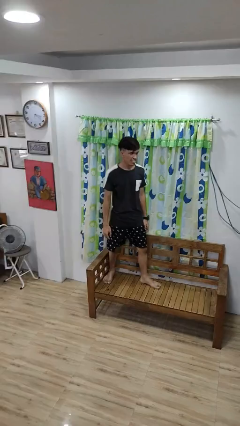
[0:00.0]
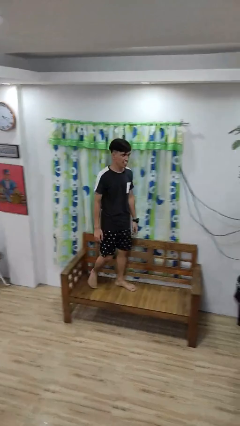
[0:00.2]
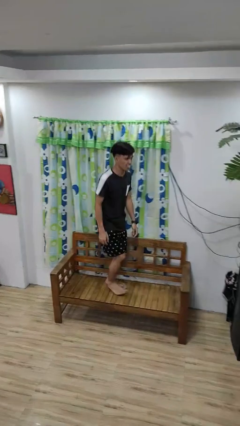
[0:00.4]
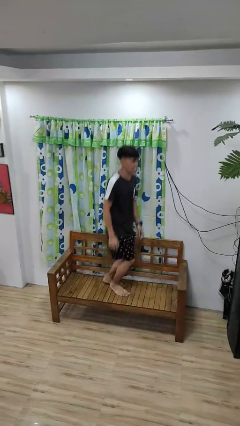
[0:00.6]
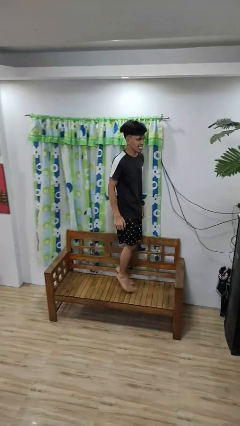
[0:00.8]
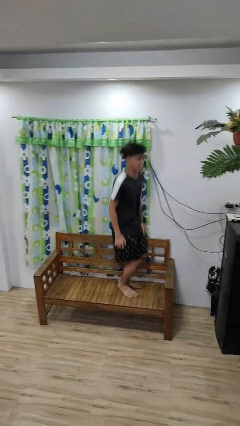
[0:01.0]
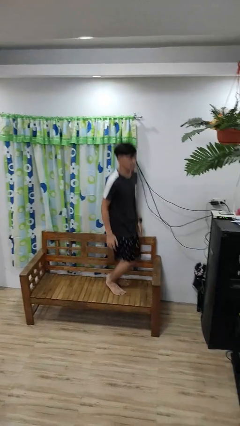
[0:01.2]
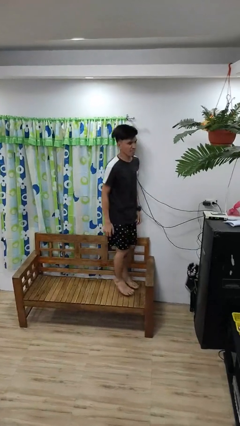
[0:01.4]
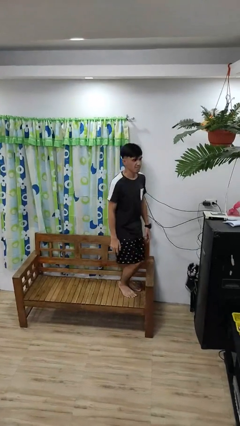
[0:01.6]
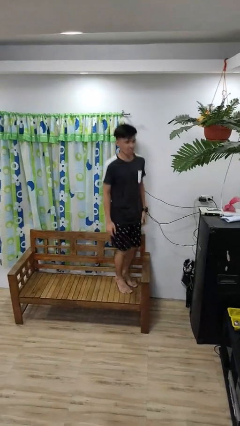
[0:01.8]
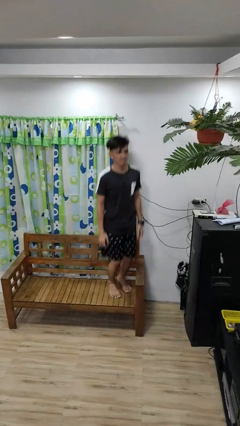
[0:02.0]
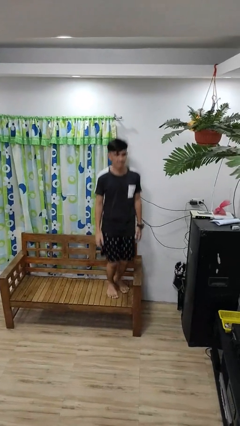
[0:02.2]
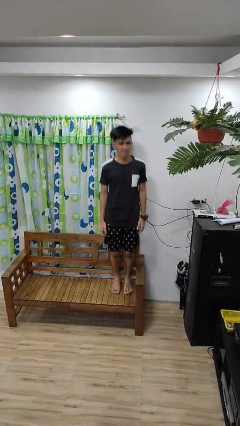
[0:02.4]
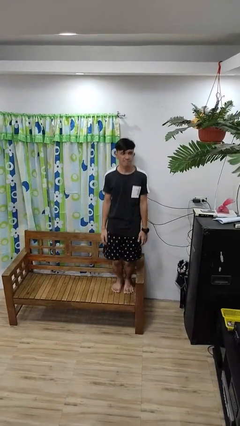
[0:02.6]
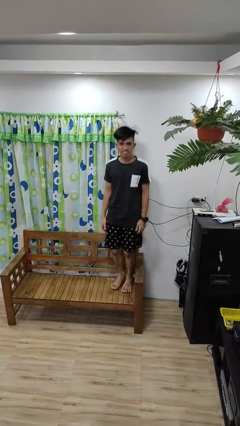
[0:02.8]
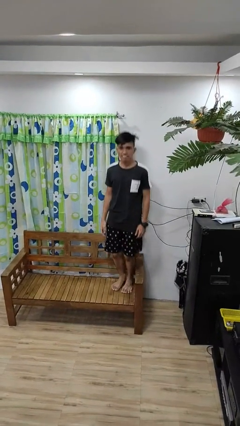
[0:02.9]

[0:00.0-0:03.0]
person jumps on couch

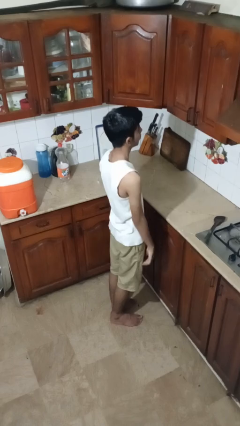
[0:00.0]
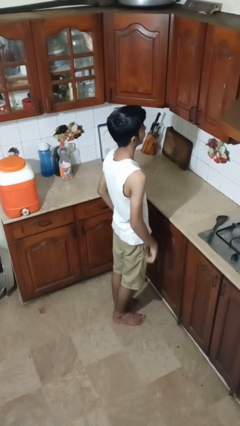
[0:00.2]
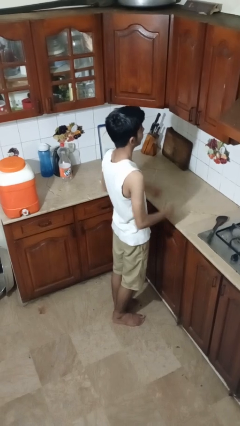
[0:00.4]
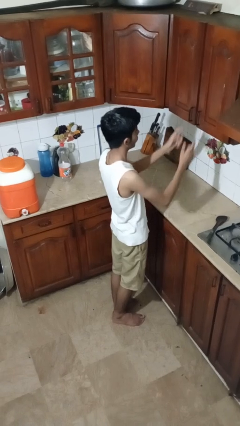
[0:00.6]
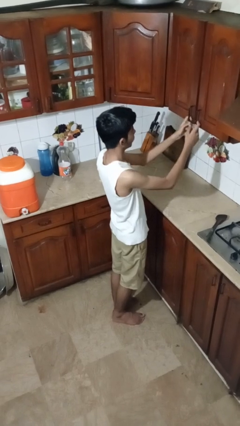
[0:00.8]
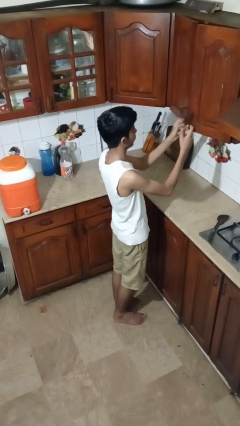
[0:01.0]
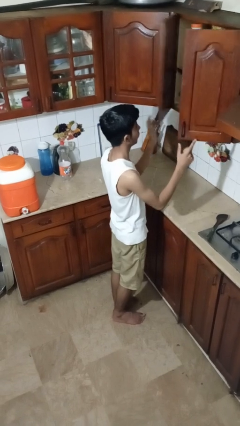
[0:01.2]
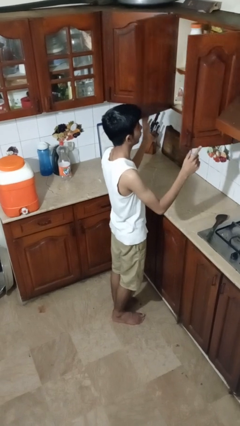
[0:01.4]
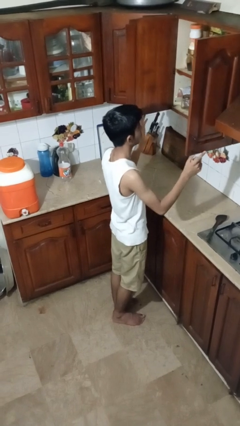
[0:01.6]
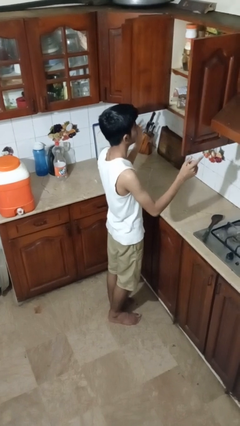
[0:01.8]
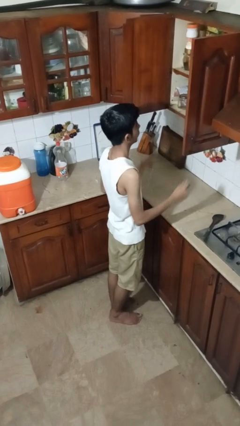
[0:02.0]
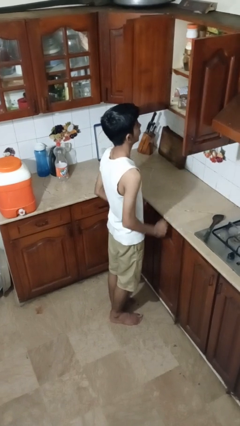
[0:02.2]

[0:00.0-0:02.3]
person opens cabinet

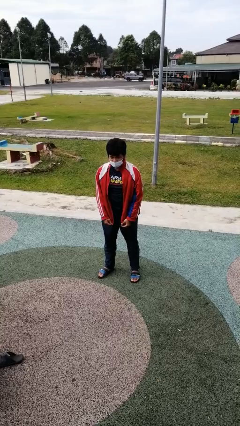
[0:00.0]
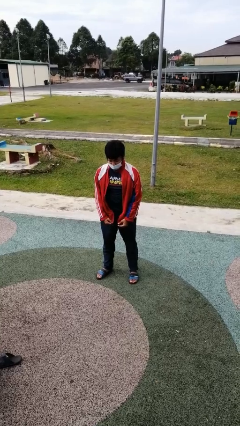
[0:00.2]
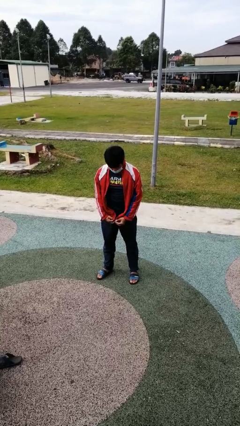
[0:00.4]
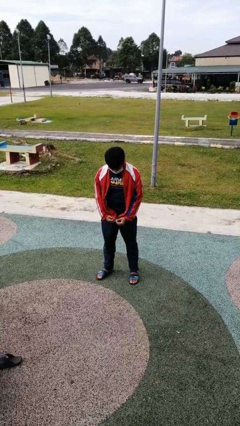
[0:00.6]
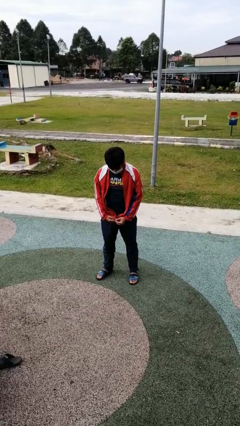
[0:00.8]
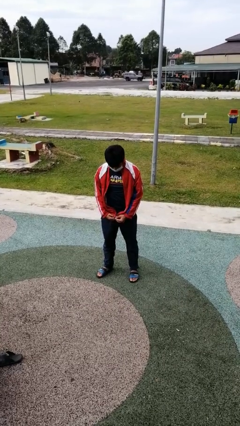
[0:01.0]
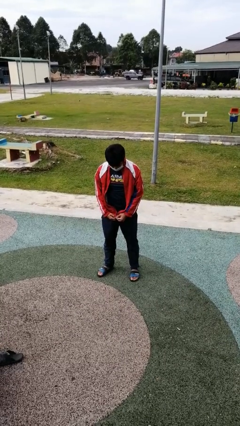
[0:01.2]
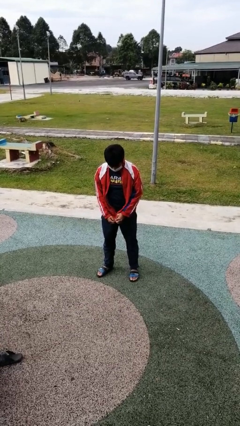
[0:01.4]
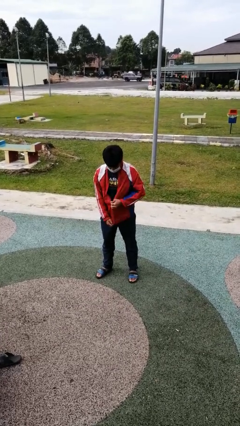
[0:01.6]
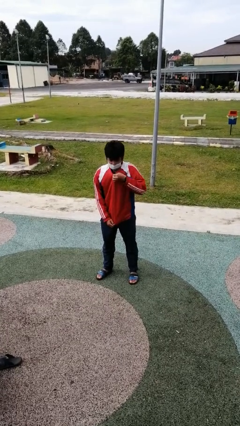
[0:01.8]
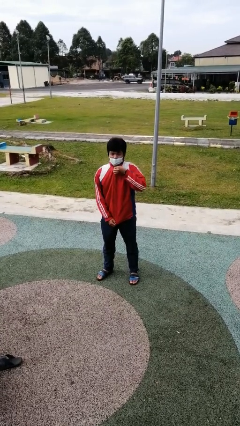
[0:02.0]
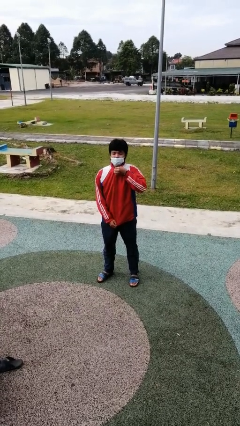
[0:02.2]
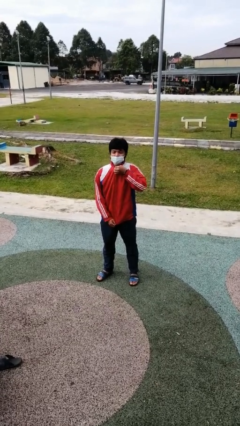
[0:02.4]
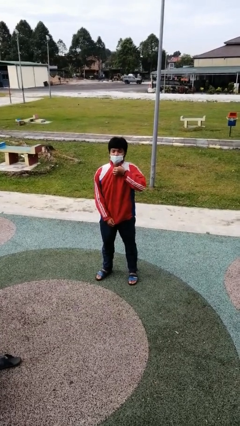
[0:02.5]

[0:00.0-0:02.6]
person zips up jacket

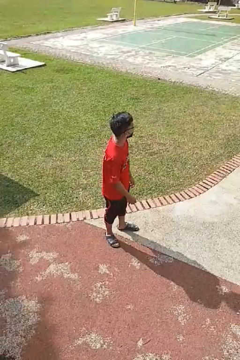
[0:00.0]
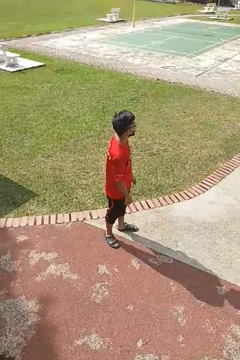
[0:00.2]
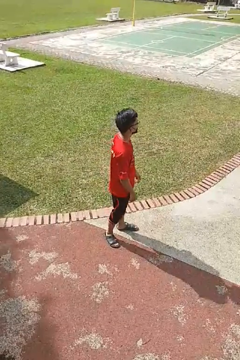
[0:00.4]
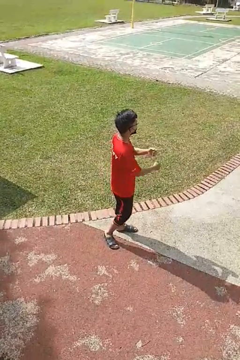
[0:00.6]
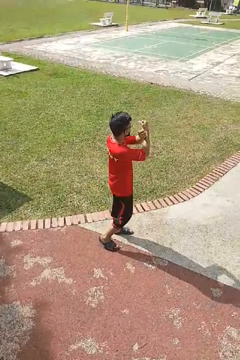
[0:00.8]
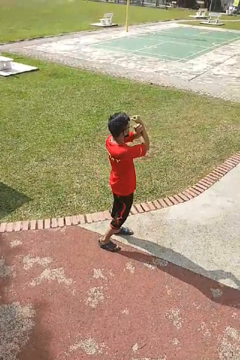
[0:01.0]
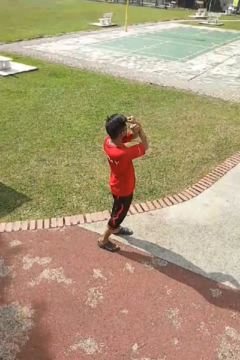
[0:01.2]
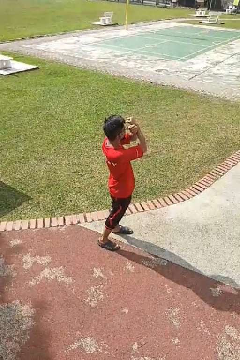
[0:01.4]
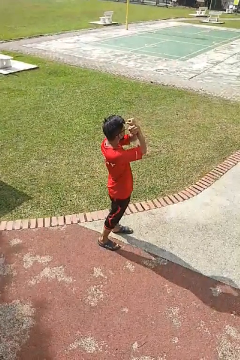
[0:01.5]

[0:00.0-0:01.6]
person gestures arms x

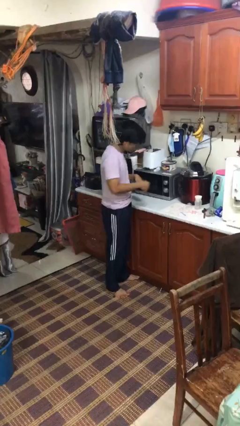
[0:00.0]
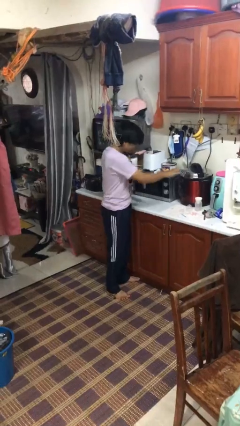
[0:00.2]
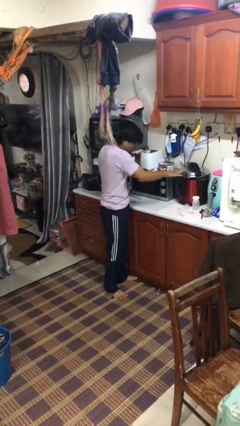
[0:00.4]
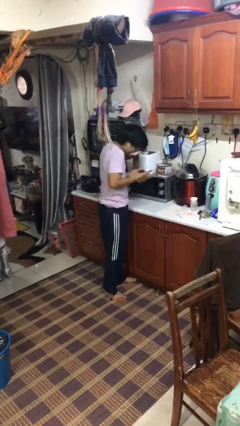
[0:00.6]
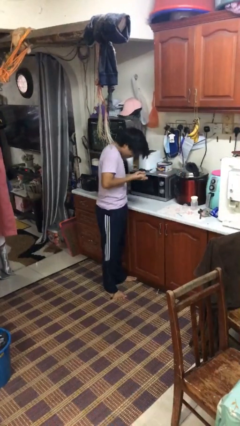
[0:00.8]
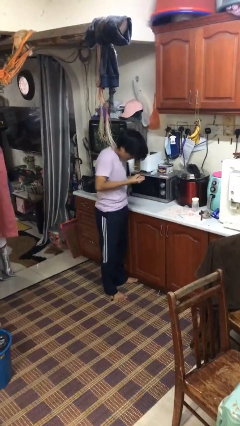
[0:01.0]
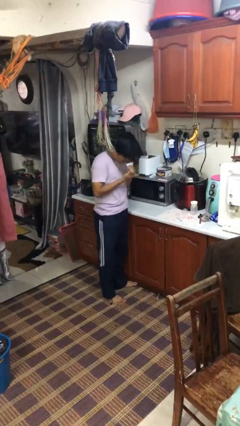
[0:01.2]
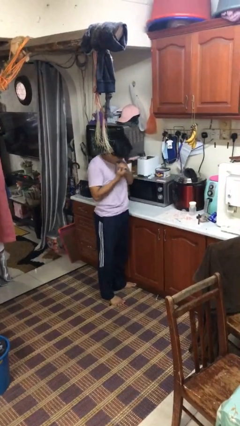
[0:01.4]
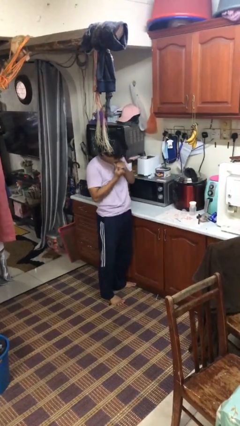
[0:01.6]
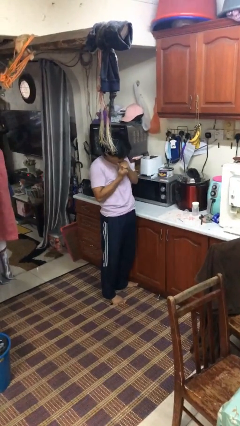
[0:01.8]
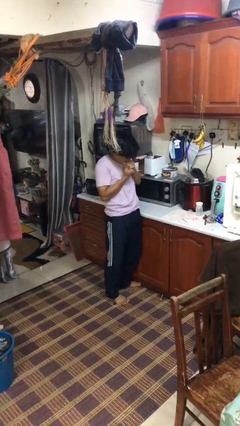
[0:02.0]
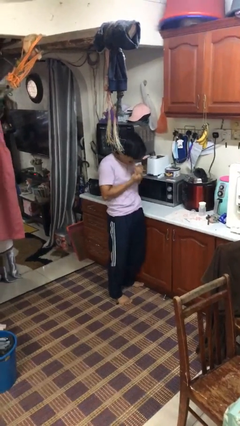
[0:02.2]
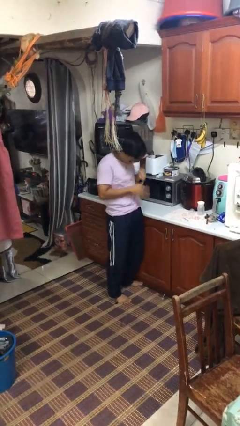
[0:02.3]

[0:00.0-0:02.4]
person burns hand

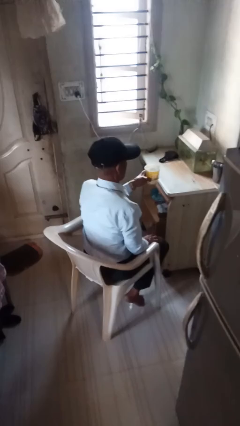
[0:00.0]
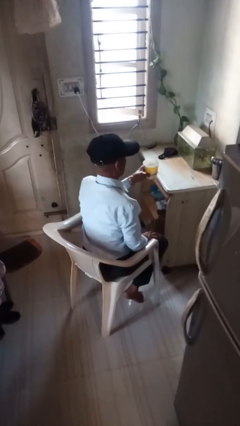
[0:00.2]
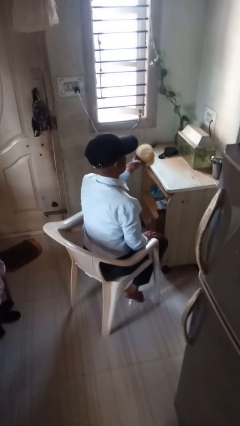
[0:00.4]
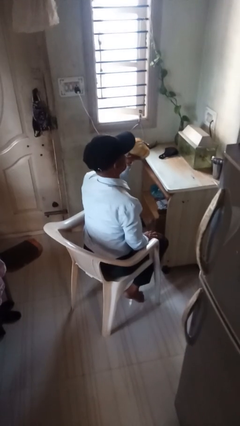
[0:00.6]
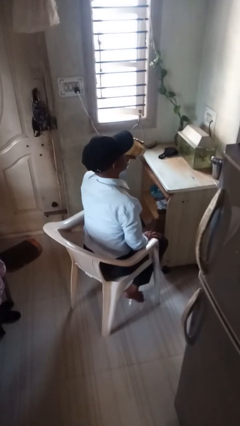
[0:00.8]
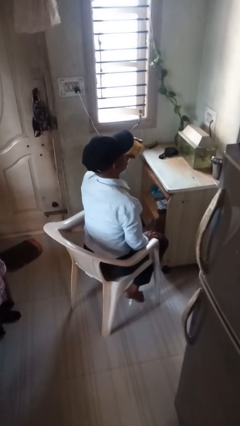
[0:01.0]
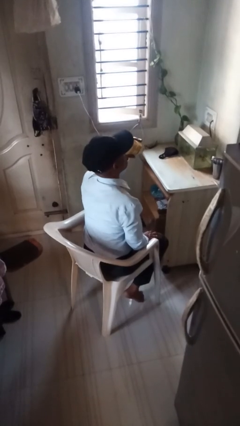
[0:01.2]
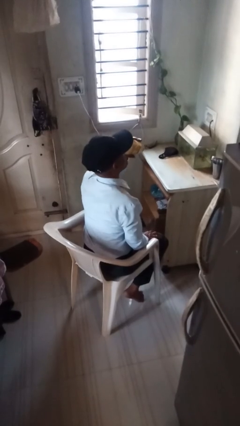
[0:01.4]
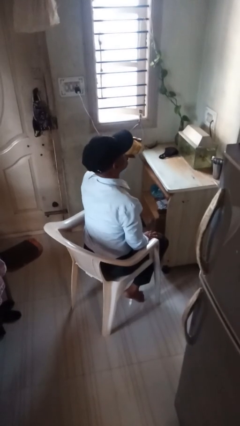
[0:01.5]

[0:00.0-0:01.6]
person drinks from mug

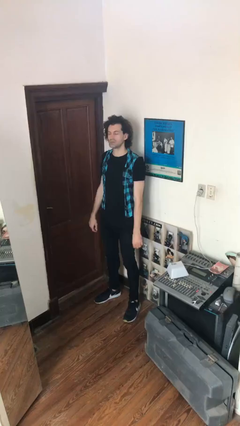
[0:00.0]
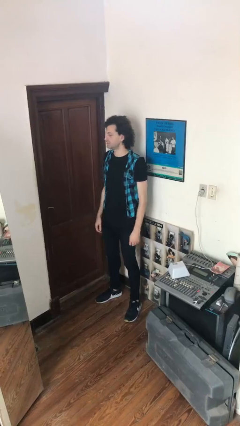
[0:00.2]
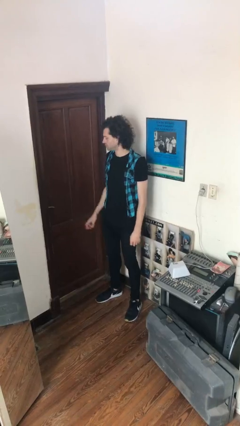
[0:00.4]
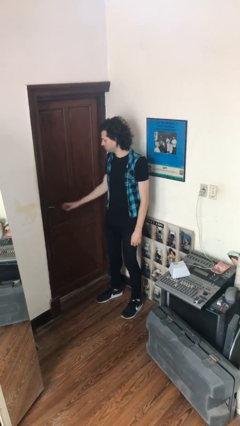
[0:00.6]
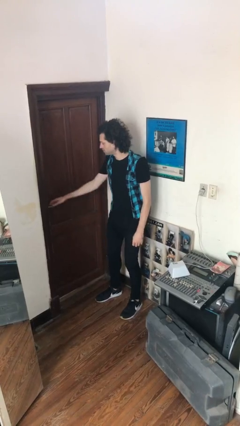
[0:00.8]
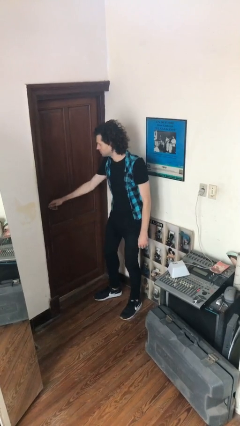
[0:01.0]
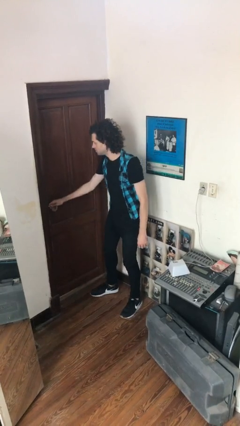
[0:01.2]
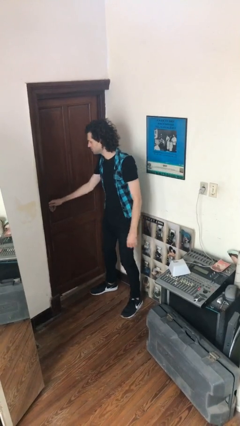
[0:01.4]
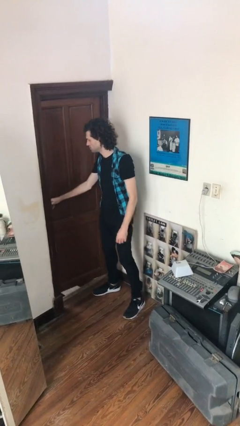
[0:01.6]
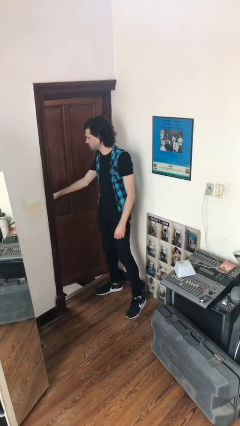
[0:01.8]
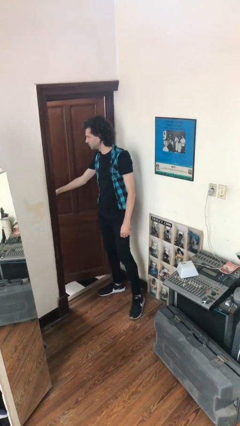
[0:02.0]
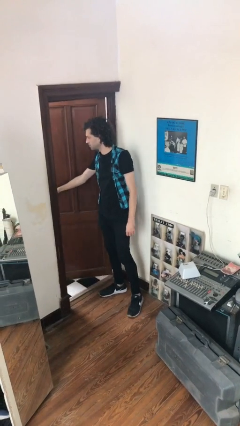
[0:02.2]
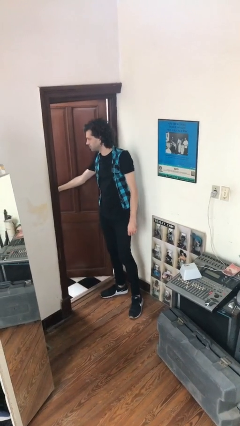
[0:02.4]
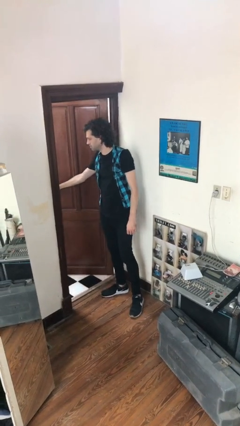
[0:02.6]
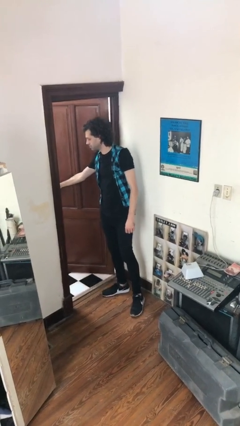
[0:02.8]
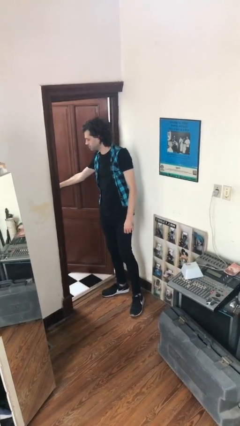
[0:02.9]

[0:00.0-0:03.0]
person opens facility door

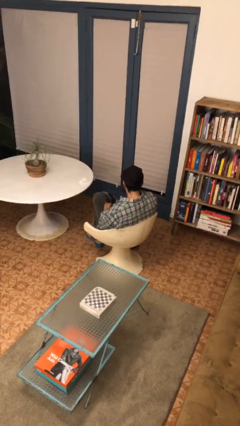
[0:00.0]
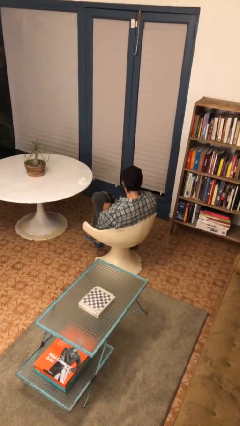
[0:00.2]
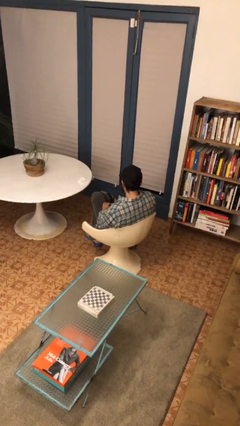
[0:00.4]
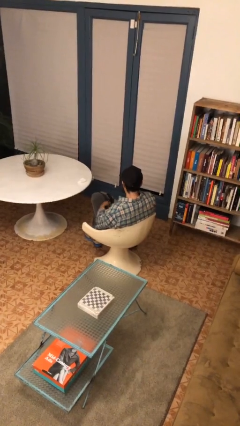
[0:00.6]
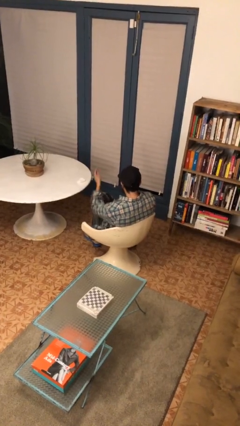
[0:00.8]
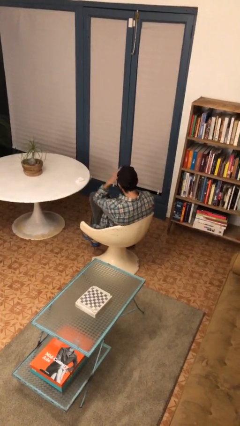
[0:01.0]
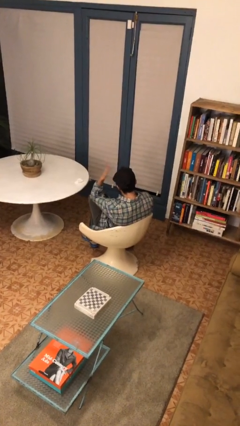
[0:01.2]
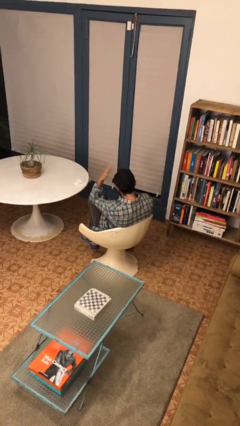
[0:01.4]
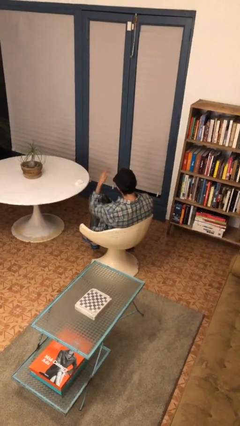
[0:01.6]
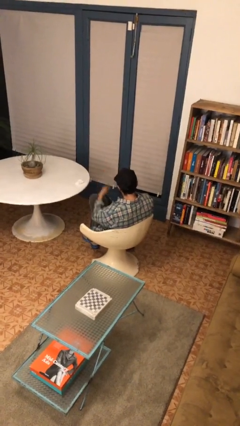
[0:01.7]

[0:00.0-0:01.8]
person pats head
